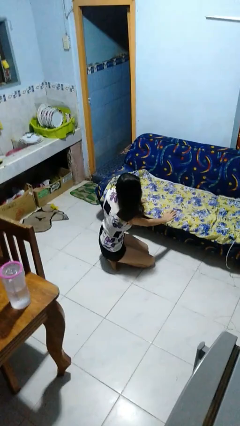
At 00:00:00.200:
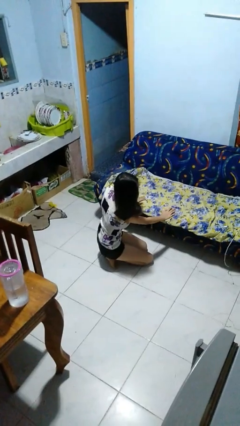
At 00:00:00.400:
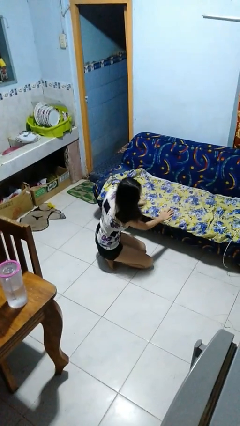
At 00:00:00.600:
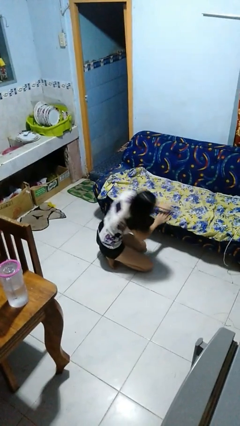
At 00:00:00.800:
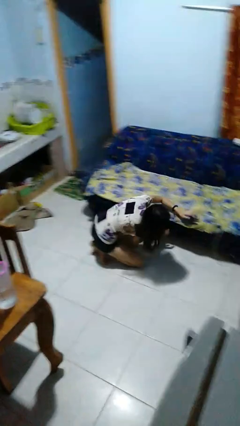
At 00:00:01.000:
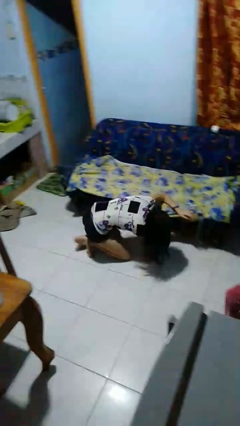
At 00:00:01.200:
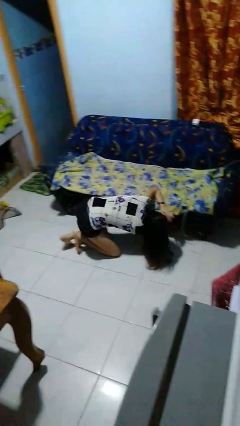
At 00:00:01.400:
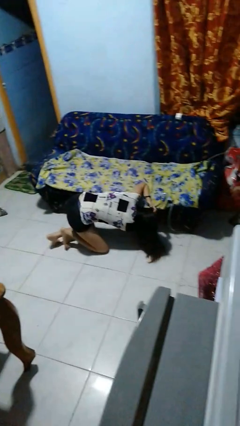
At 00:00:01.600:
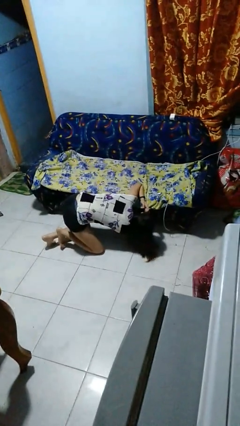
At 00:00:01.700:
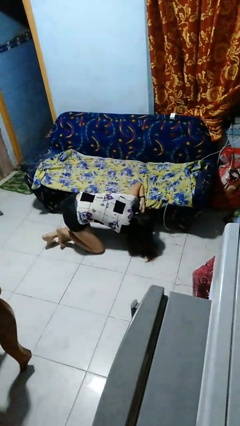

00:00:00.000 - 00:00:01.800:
person searches under couch

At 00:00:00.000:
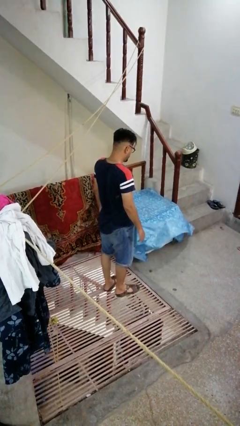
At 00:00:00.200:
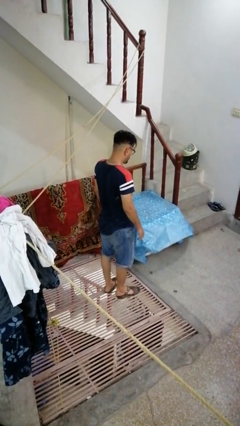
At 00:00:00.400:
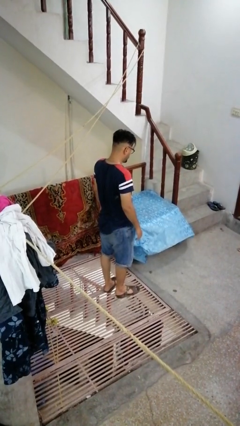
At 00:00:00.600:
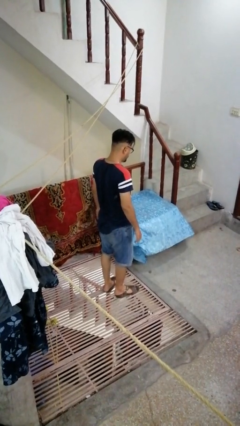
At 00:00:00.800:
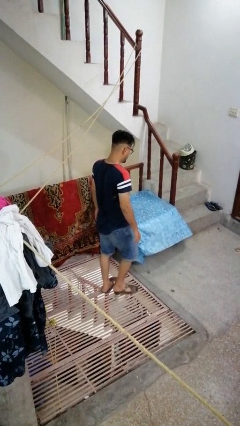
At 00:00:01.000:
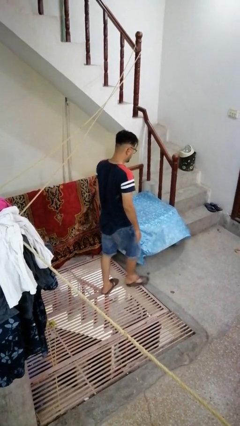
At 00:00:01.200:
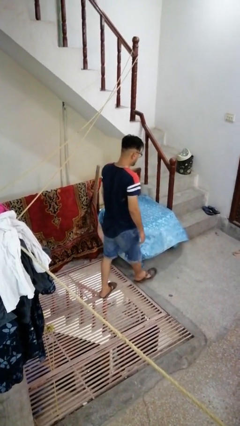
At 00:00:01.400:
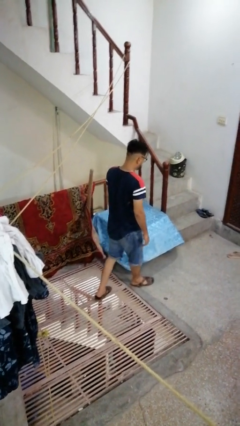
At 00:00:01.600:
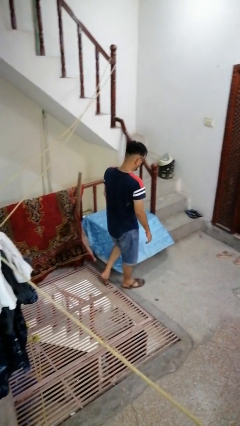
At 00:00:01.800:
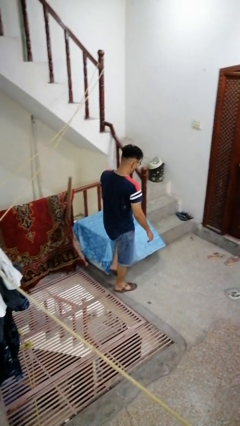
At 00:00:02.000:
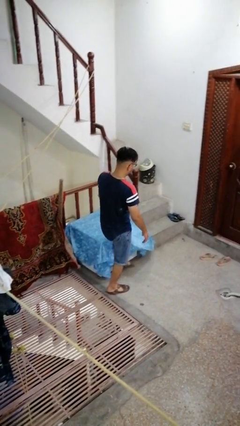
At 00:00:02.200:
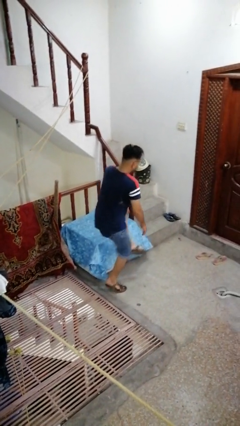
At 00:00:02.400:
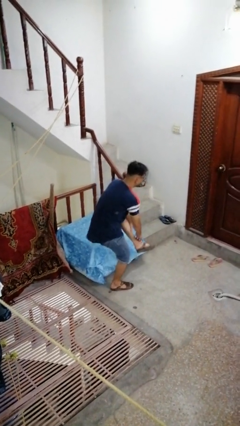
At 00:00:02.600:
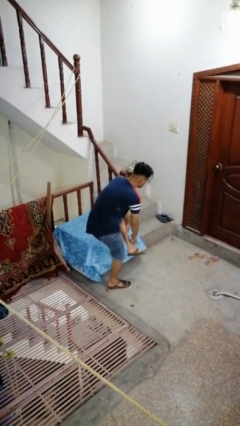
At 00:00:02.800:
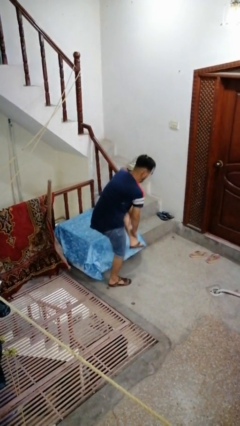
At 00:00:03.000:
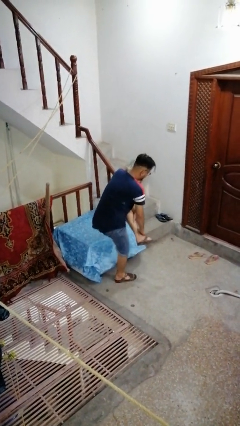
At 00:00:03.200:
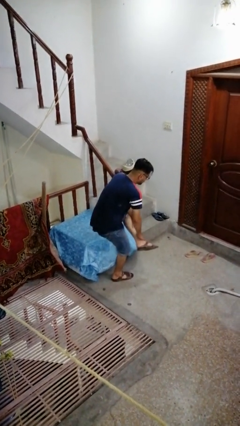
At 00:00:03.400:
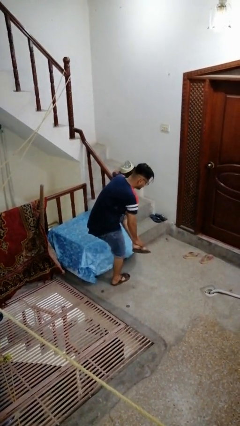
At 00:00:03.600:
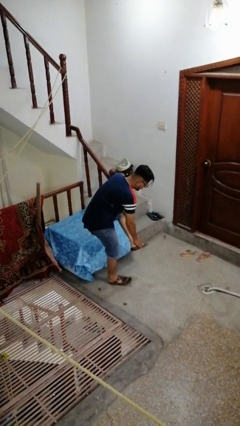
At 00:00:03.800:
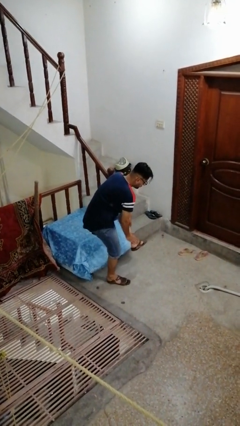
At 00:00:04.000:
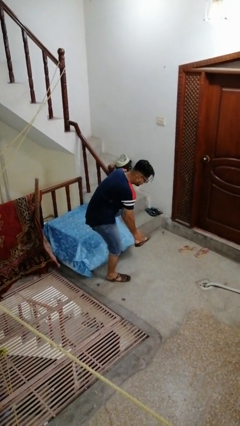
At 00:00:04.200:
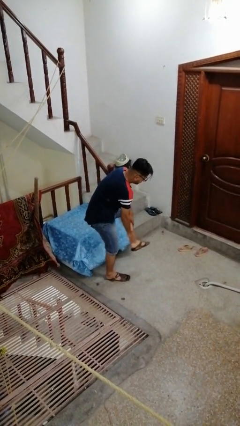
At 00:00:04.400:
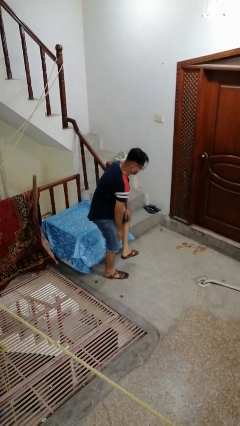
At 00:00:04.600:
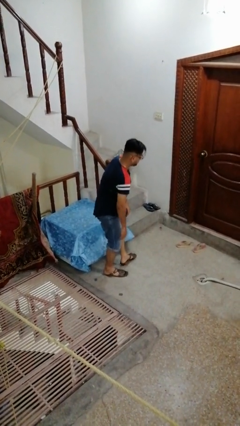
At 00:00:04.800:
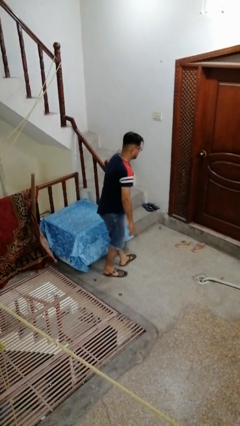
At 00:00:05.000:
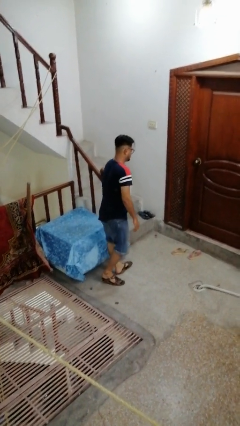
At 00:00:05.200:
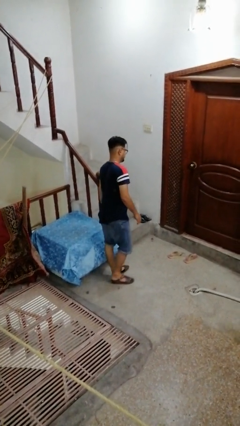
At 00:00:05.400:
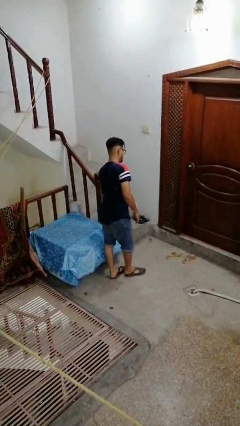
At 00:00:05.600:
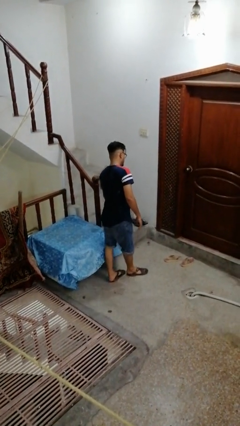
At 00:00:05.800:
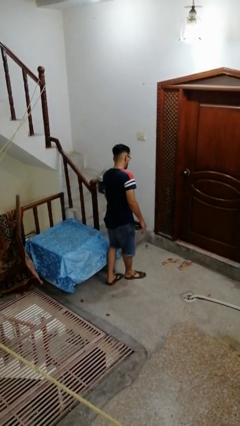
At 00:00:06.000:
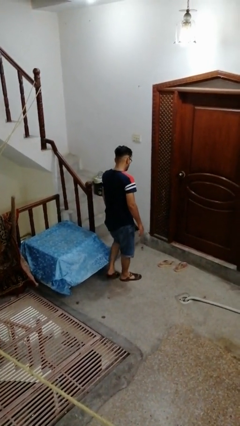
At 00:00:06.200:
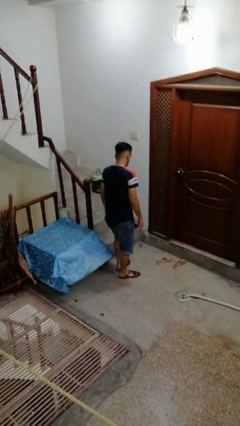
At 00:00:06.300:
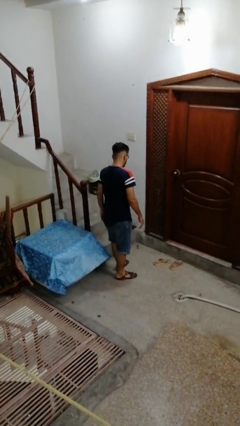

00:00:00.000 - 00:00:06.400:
person bumps into table

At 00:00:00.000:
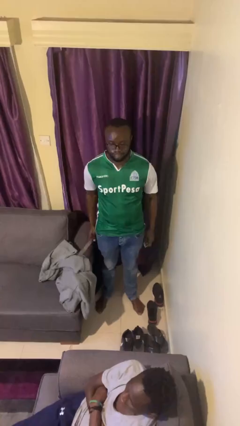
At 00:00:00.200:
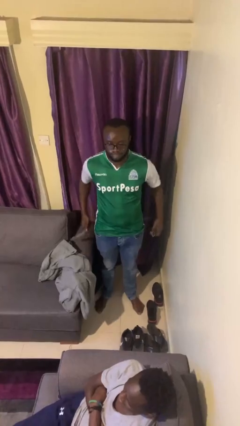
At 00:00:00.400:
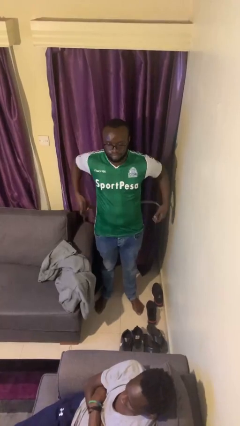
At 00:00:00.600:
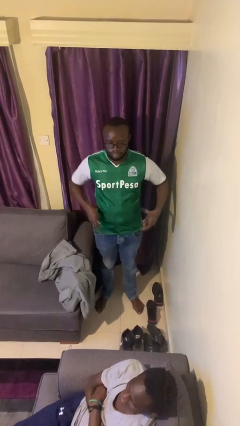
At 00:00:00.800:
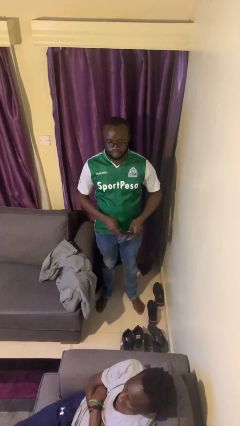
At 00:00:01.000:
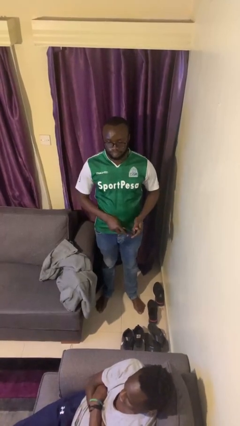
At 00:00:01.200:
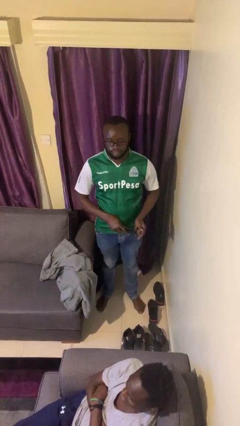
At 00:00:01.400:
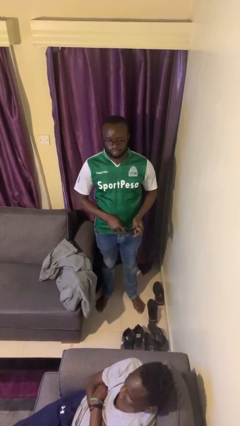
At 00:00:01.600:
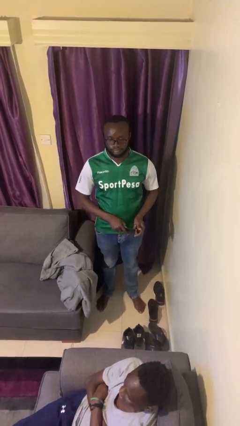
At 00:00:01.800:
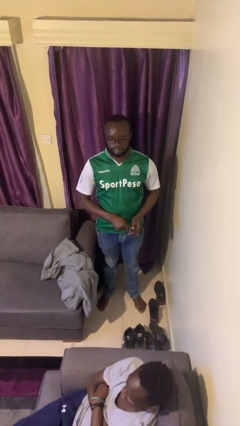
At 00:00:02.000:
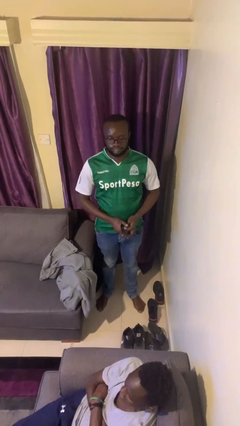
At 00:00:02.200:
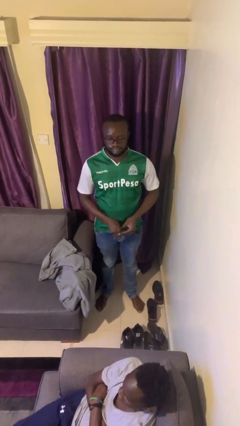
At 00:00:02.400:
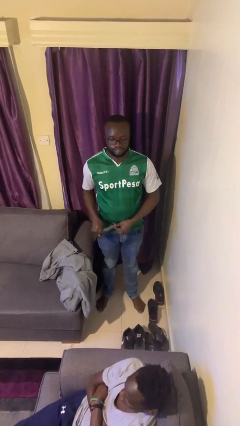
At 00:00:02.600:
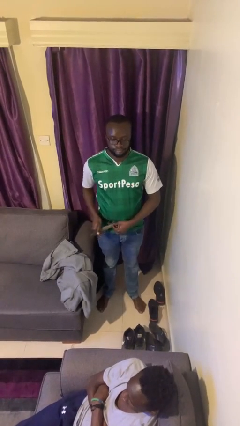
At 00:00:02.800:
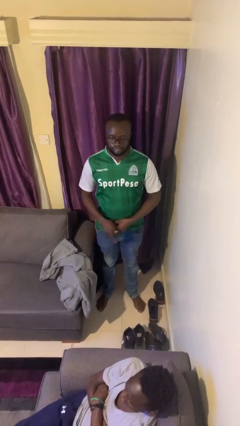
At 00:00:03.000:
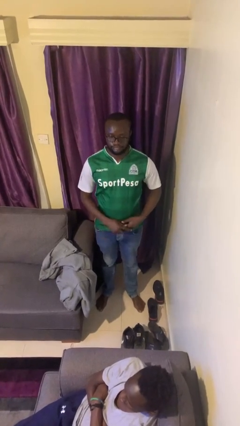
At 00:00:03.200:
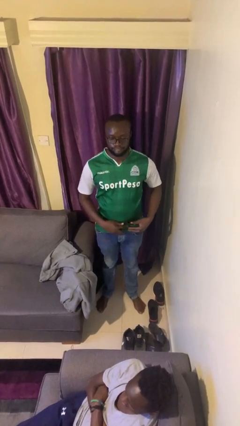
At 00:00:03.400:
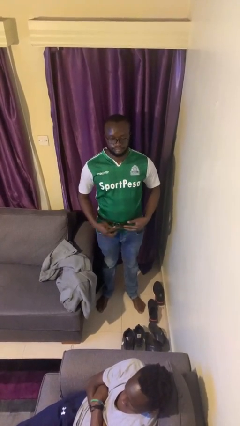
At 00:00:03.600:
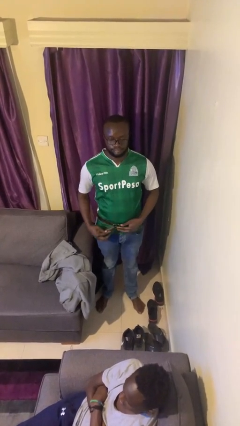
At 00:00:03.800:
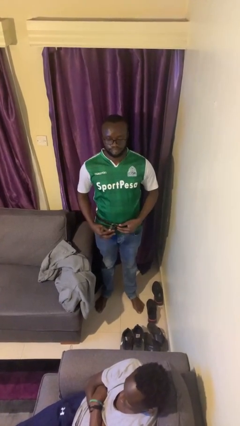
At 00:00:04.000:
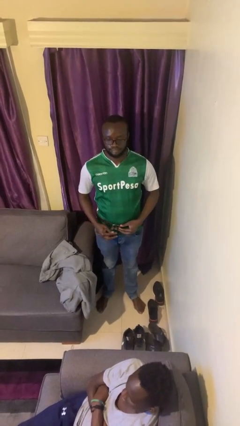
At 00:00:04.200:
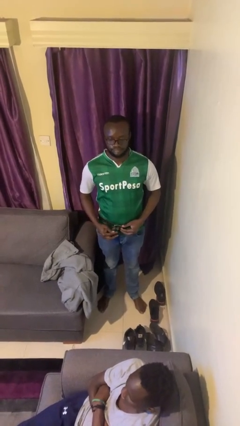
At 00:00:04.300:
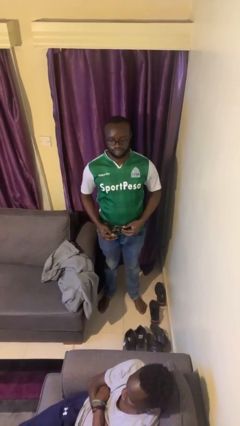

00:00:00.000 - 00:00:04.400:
person puts on belt

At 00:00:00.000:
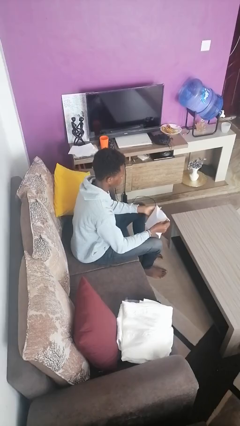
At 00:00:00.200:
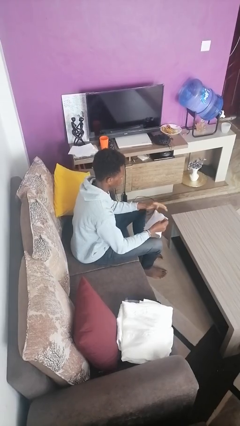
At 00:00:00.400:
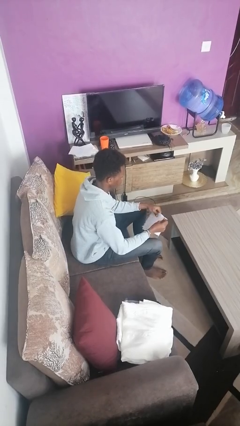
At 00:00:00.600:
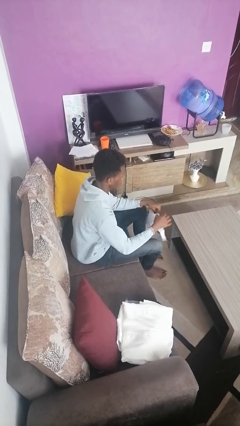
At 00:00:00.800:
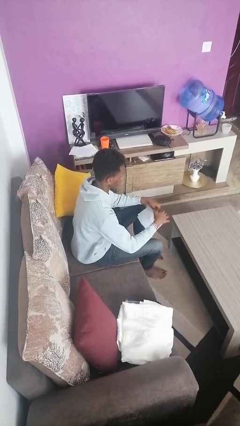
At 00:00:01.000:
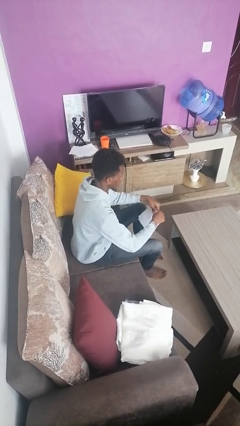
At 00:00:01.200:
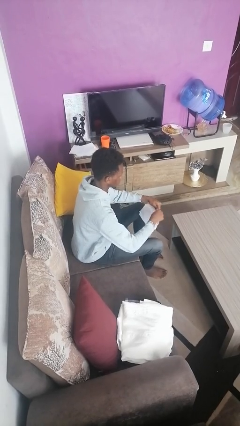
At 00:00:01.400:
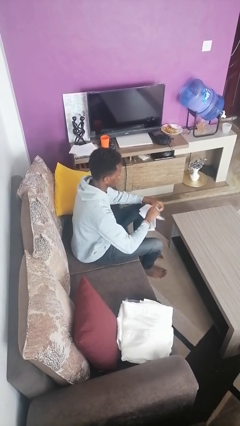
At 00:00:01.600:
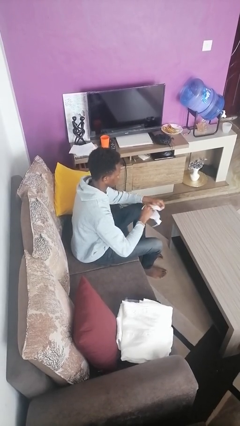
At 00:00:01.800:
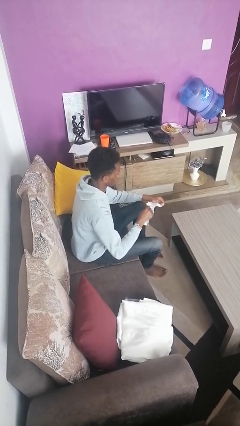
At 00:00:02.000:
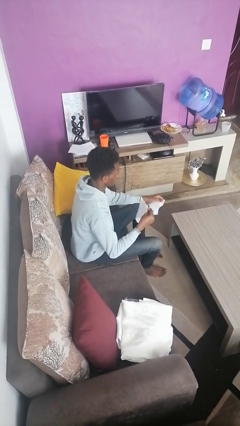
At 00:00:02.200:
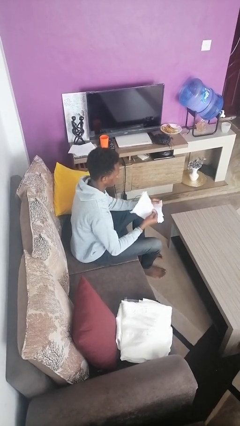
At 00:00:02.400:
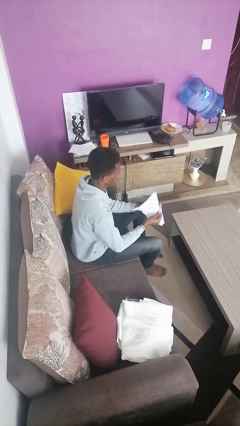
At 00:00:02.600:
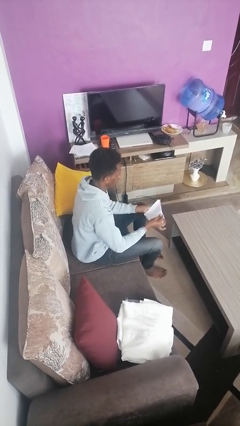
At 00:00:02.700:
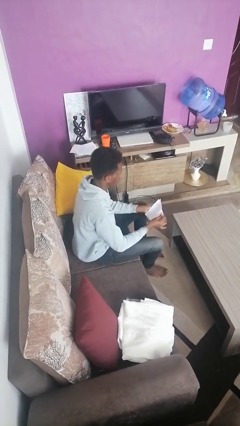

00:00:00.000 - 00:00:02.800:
person tears paper

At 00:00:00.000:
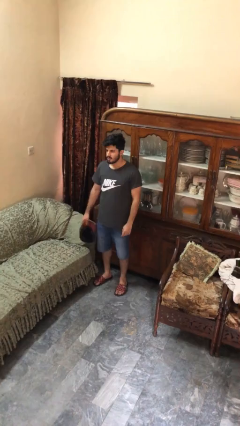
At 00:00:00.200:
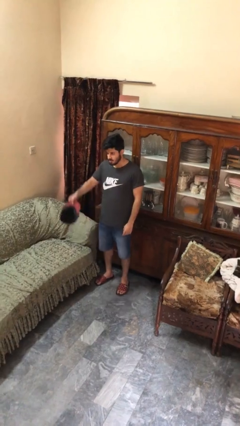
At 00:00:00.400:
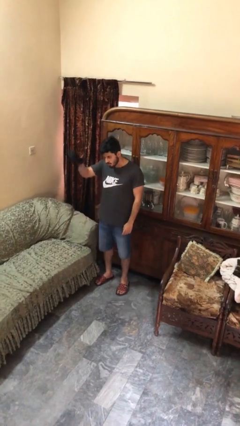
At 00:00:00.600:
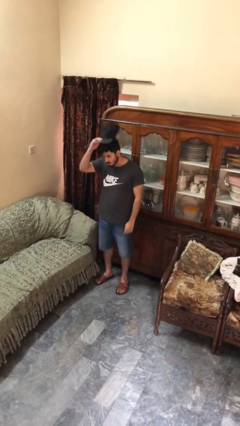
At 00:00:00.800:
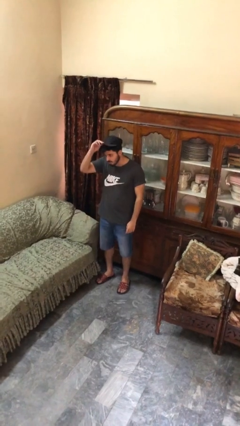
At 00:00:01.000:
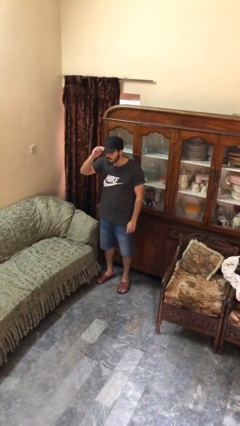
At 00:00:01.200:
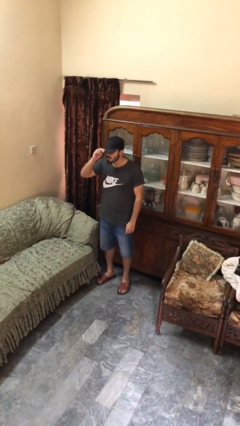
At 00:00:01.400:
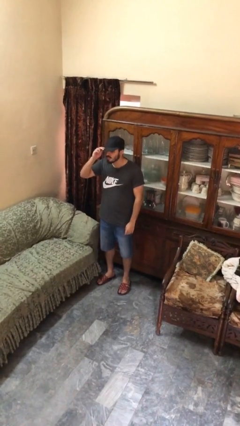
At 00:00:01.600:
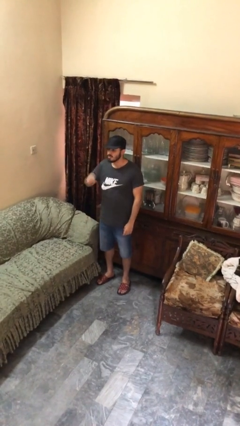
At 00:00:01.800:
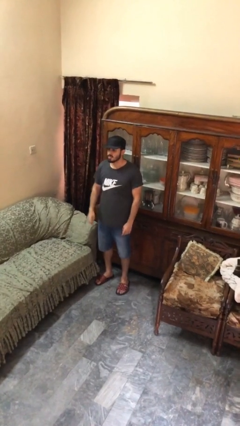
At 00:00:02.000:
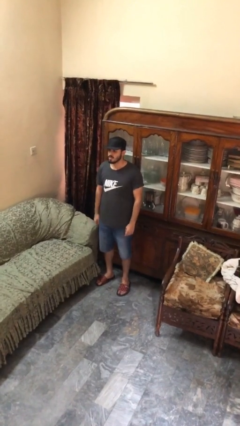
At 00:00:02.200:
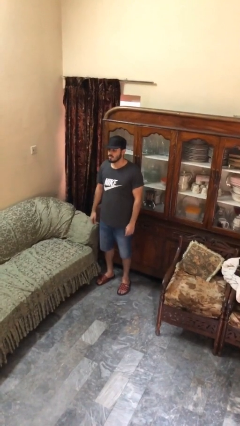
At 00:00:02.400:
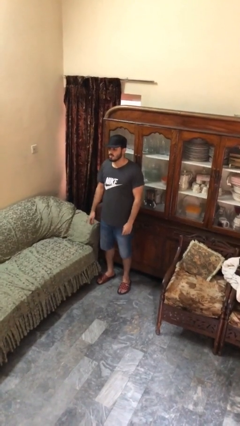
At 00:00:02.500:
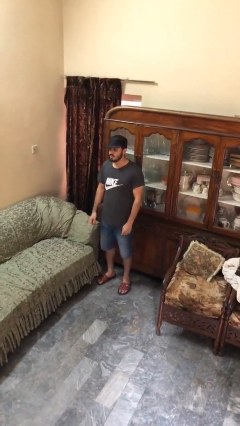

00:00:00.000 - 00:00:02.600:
person puts on hat
